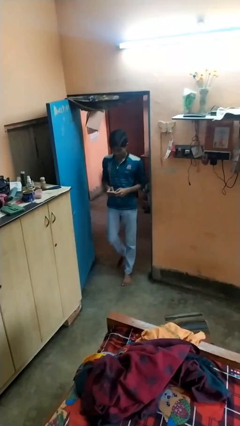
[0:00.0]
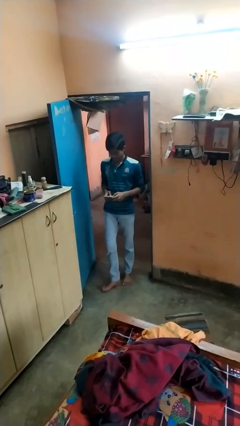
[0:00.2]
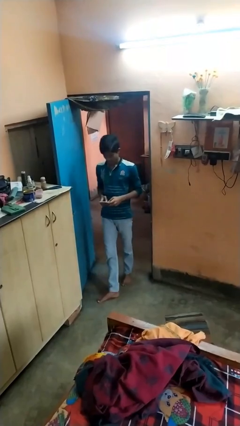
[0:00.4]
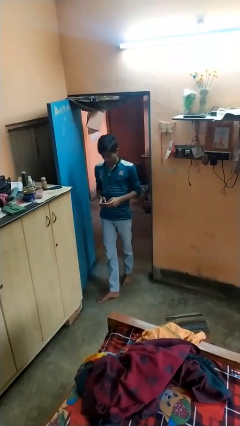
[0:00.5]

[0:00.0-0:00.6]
person enters scene through structure

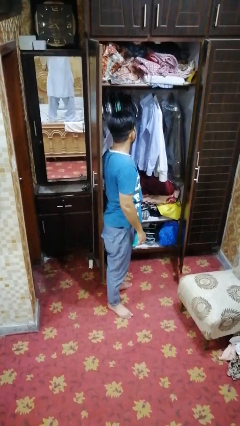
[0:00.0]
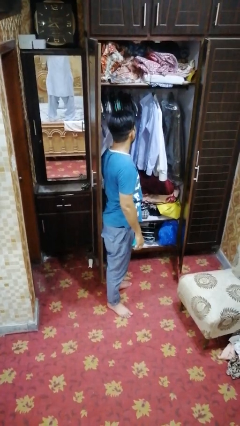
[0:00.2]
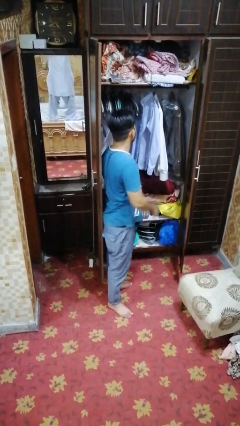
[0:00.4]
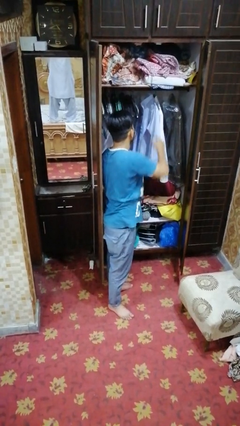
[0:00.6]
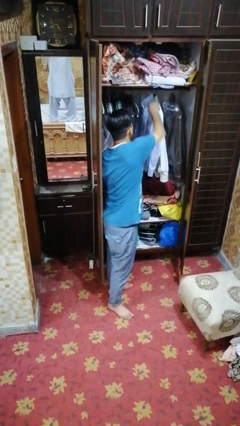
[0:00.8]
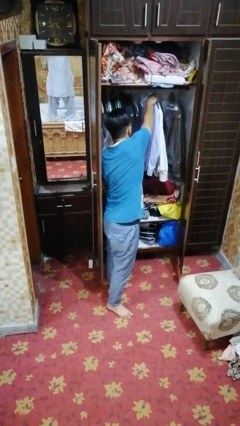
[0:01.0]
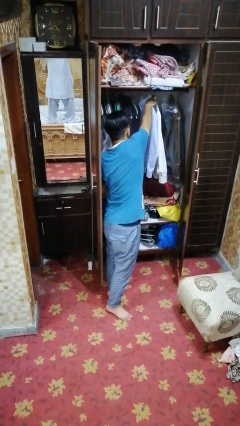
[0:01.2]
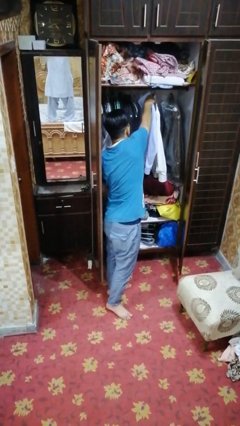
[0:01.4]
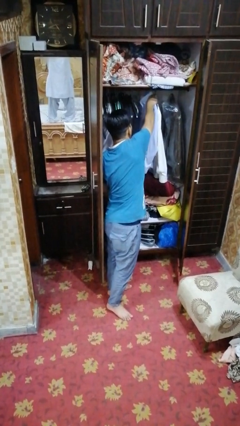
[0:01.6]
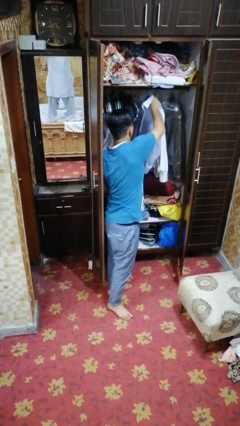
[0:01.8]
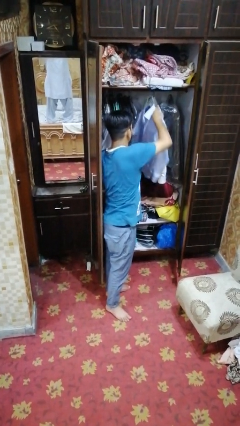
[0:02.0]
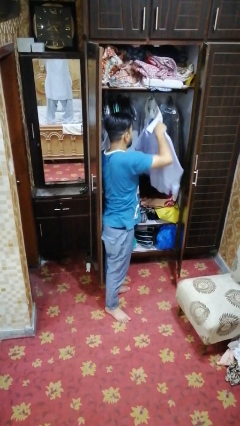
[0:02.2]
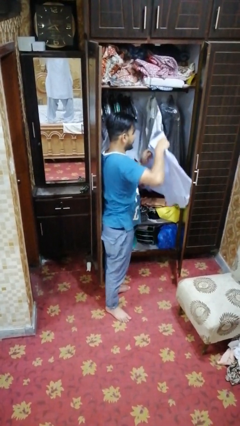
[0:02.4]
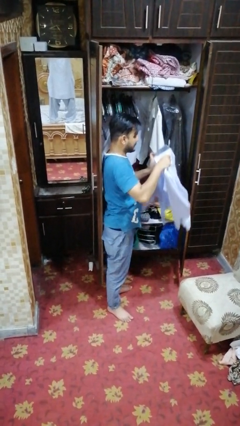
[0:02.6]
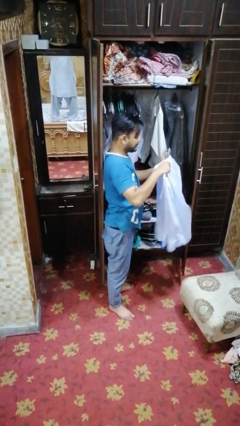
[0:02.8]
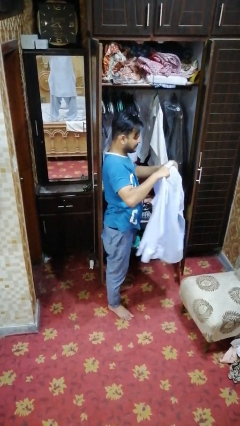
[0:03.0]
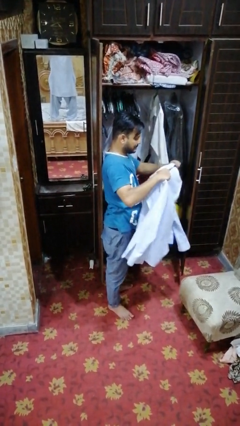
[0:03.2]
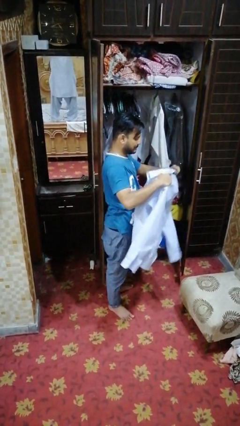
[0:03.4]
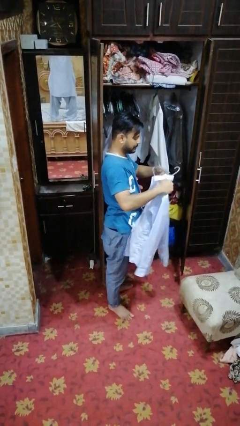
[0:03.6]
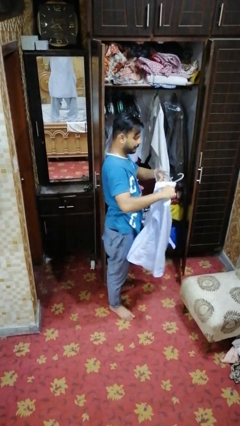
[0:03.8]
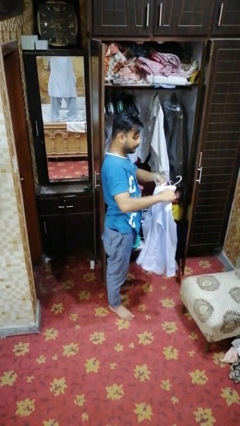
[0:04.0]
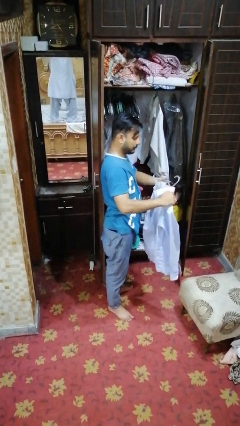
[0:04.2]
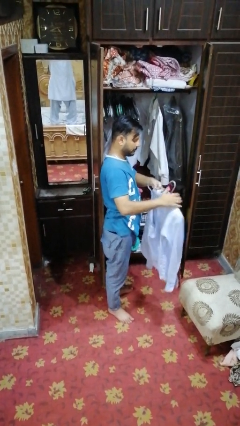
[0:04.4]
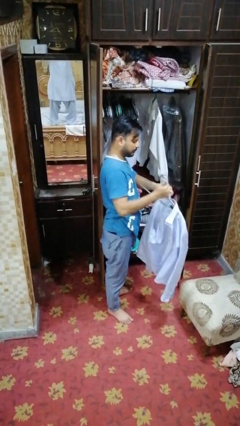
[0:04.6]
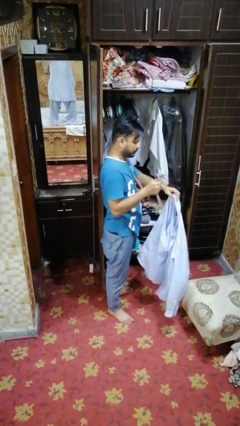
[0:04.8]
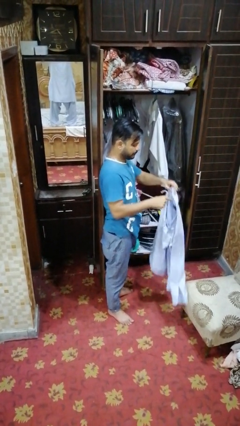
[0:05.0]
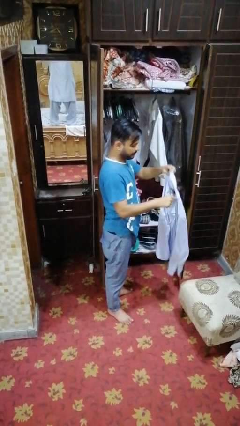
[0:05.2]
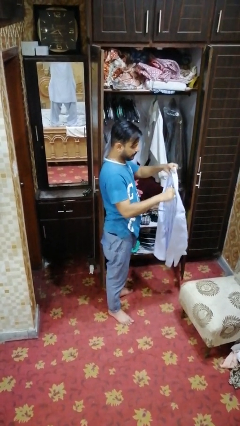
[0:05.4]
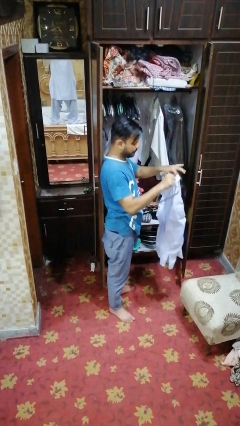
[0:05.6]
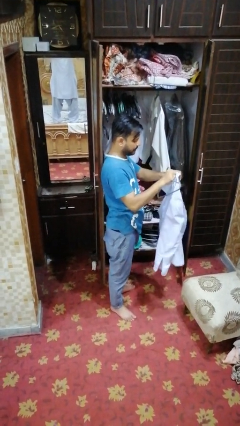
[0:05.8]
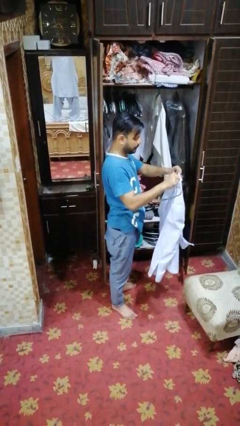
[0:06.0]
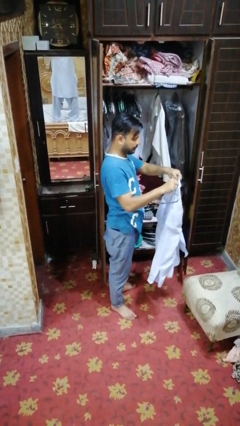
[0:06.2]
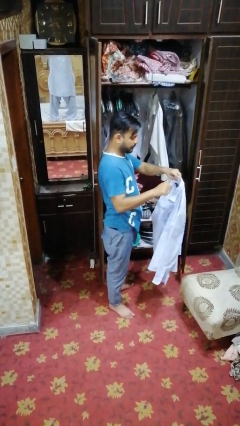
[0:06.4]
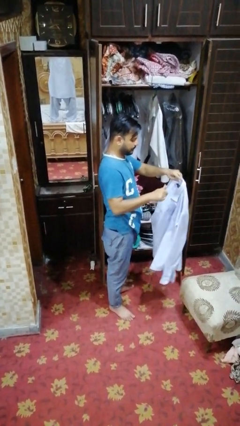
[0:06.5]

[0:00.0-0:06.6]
person takes clothes from closet

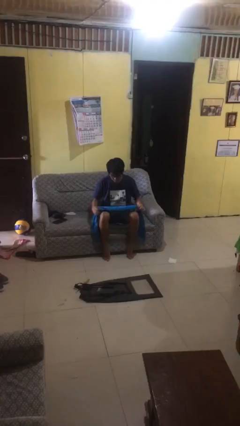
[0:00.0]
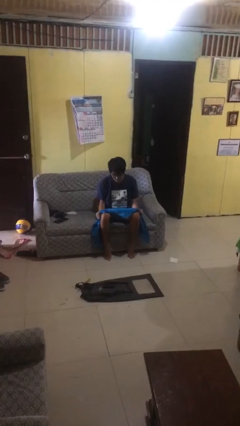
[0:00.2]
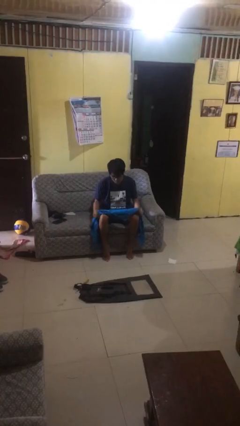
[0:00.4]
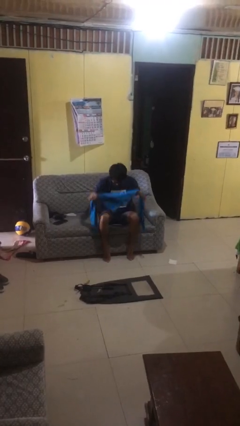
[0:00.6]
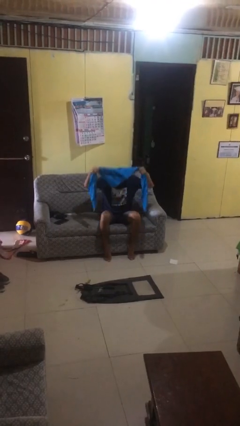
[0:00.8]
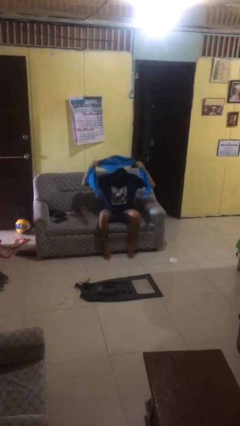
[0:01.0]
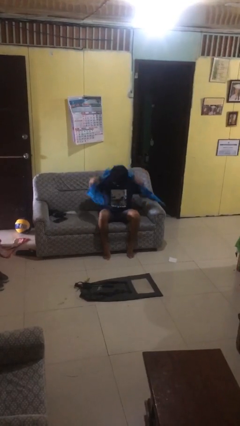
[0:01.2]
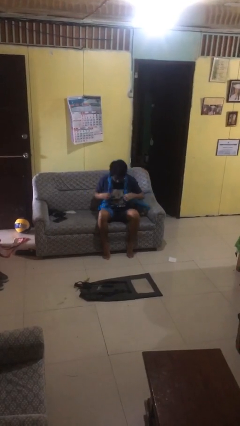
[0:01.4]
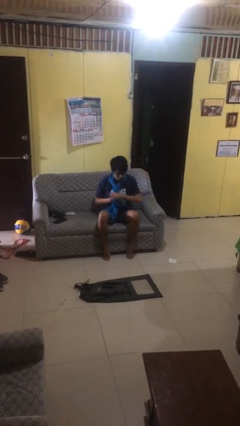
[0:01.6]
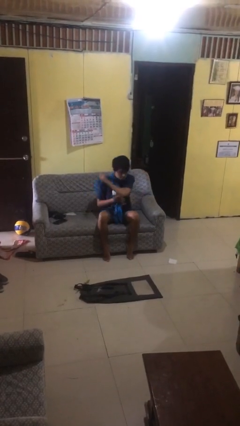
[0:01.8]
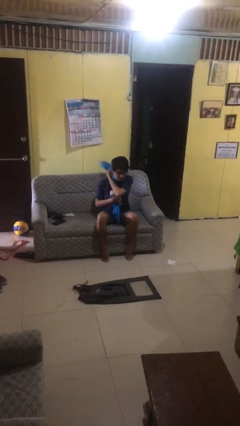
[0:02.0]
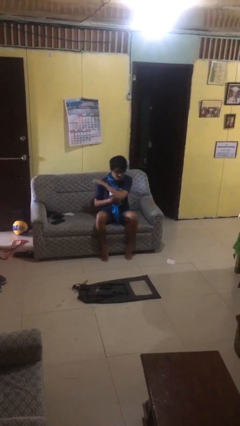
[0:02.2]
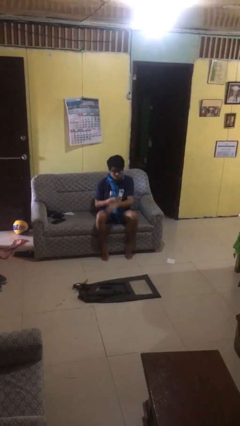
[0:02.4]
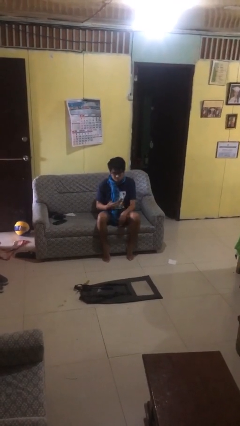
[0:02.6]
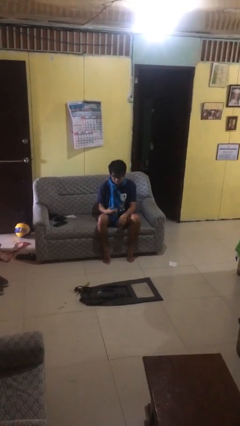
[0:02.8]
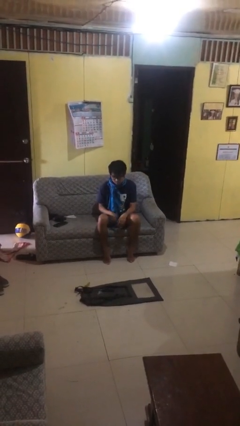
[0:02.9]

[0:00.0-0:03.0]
person puts on scarf

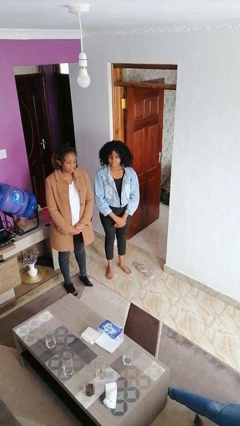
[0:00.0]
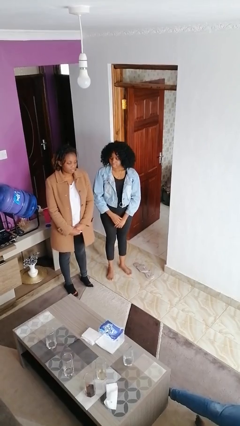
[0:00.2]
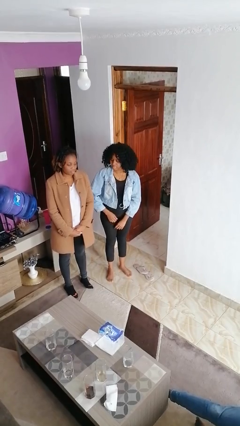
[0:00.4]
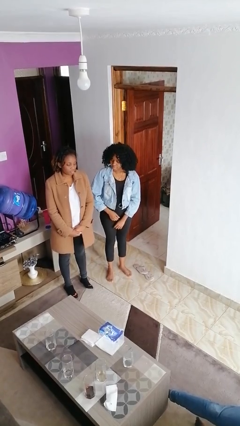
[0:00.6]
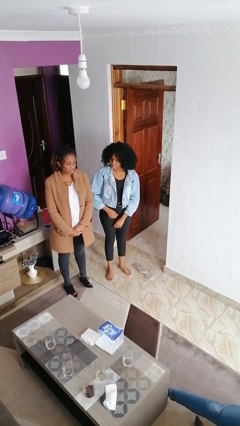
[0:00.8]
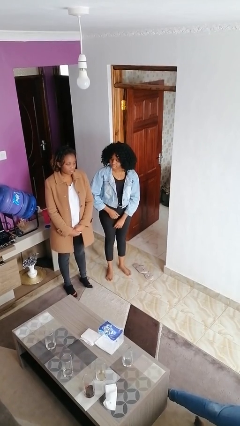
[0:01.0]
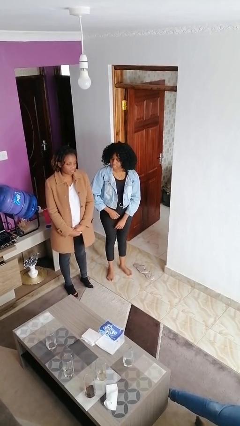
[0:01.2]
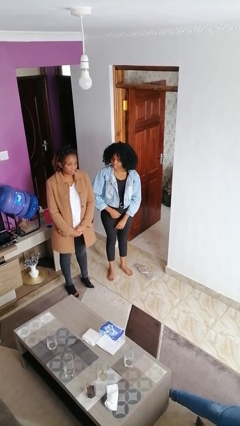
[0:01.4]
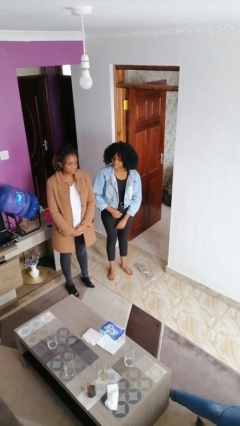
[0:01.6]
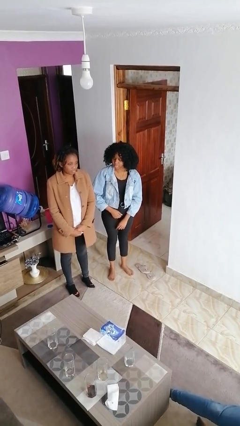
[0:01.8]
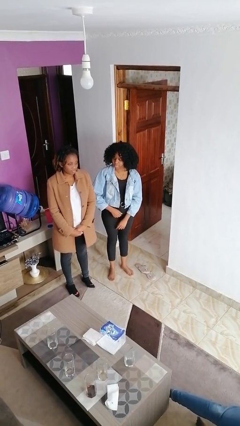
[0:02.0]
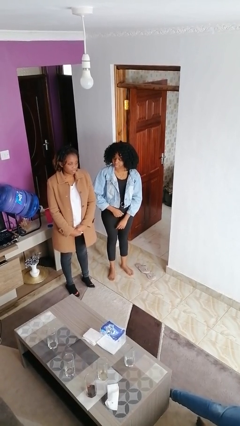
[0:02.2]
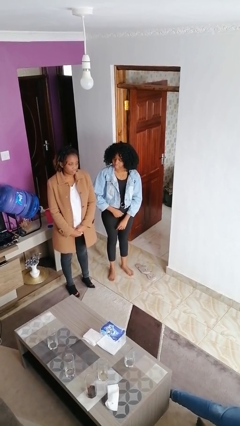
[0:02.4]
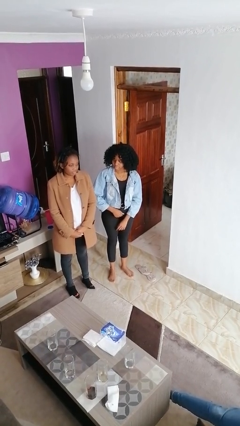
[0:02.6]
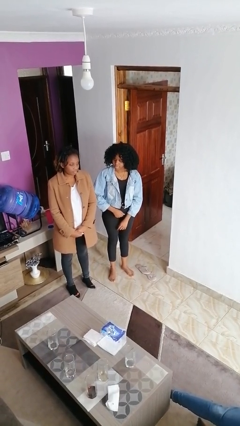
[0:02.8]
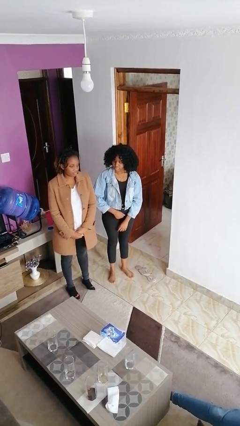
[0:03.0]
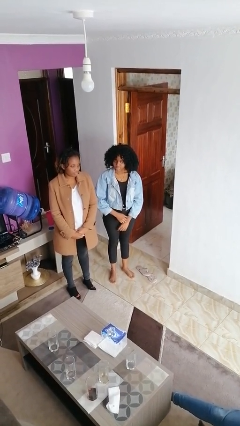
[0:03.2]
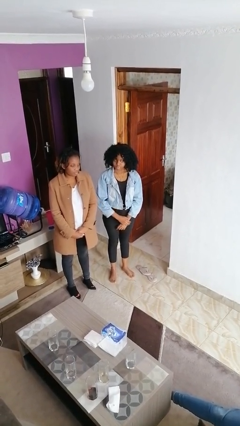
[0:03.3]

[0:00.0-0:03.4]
person nudges person with elbow

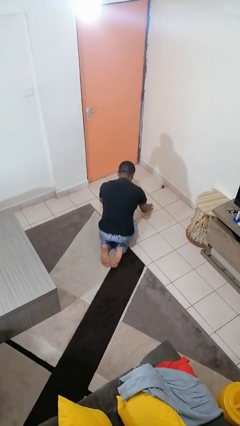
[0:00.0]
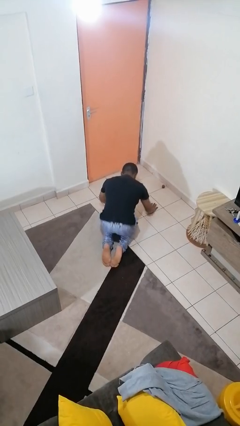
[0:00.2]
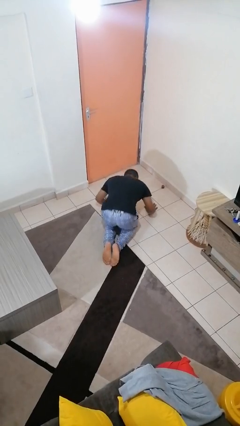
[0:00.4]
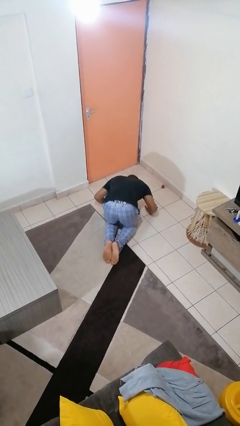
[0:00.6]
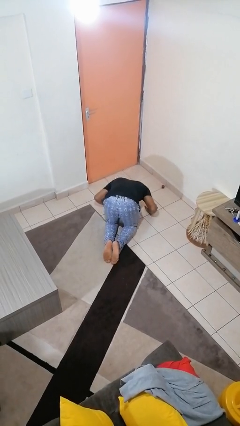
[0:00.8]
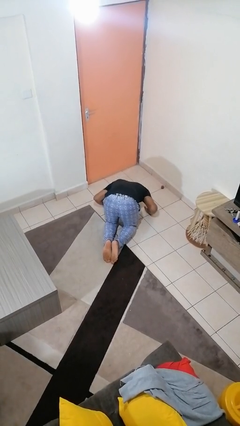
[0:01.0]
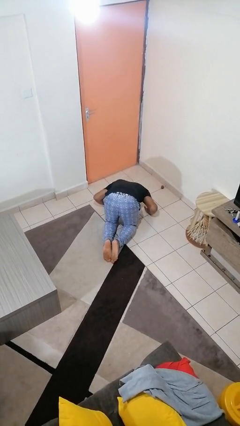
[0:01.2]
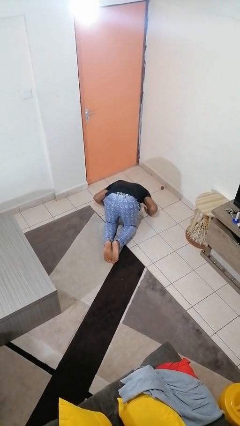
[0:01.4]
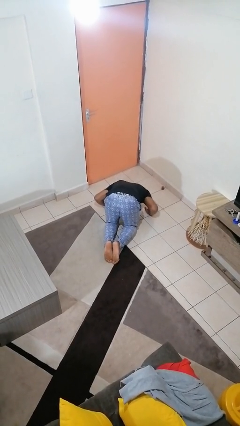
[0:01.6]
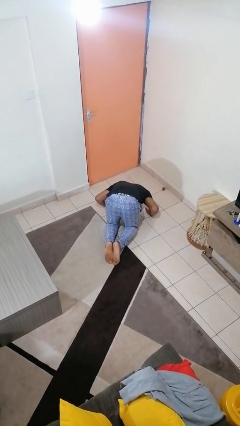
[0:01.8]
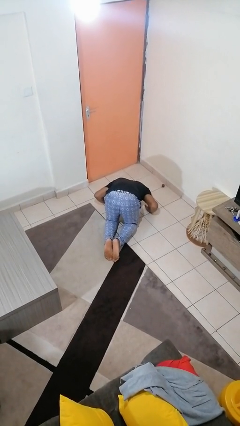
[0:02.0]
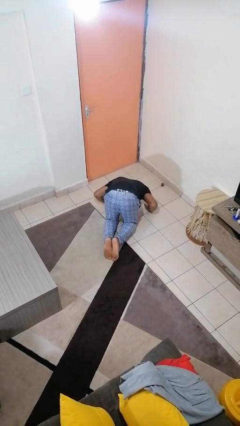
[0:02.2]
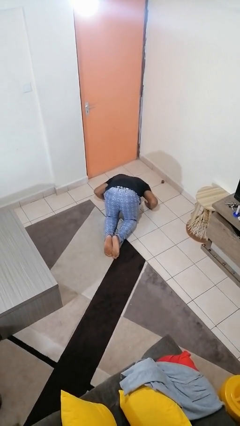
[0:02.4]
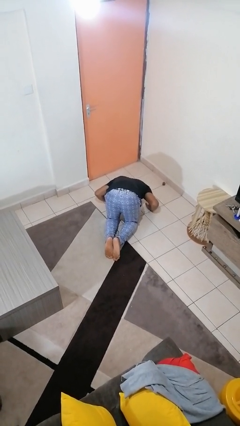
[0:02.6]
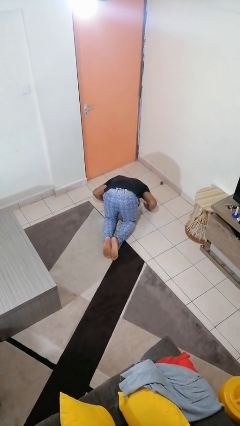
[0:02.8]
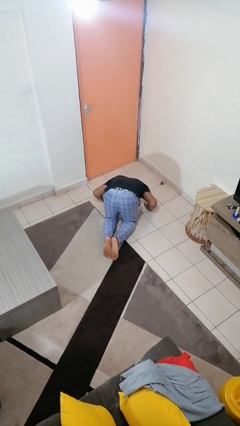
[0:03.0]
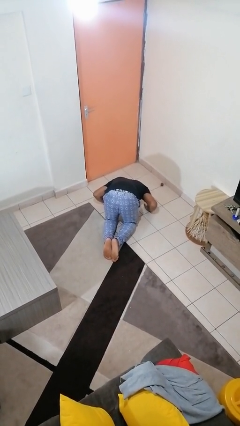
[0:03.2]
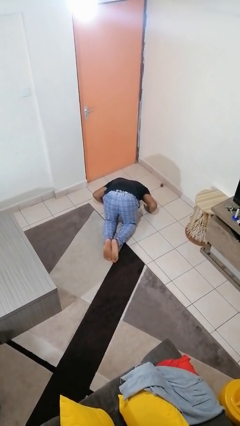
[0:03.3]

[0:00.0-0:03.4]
person prays

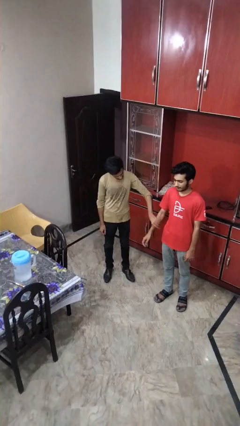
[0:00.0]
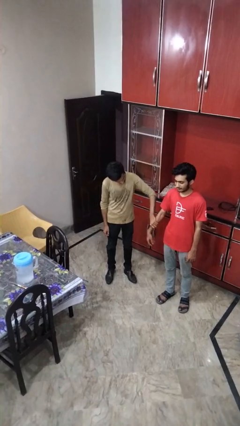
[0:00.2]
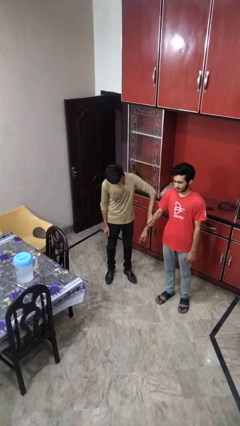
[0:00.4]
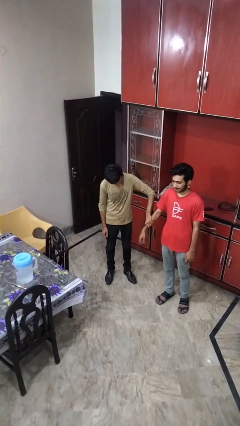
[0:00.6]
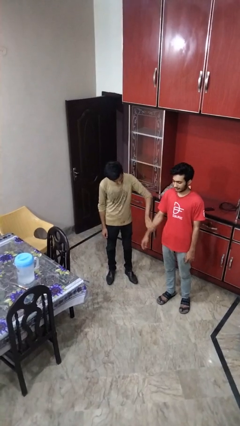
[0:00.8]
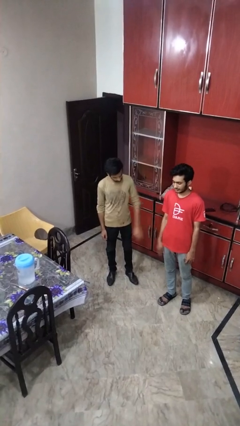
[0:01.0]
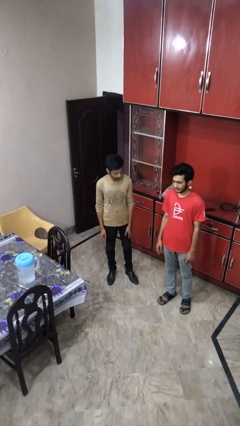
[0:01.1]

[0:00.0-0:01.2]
person grabs person by forearm
